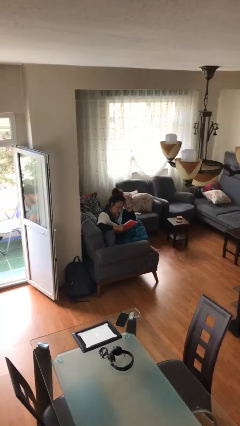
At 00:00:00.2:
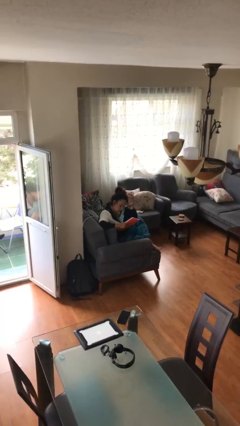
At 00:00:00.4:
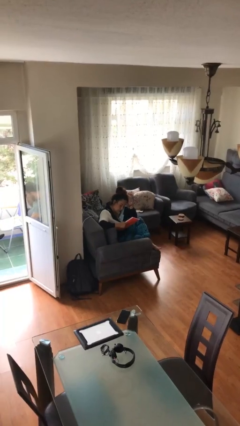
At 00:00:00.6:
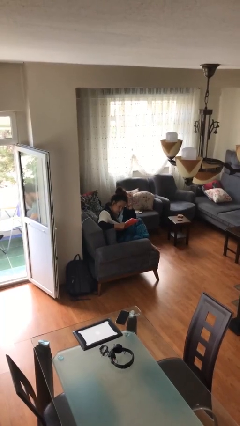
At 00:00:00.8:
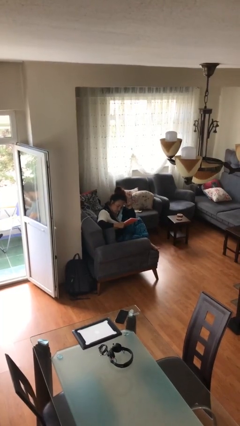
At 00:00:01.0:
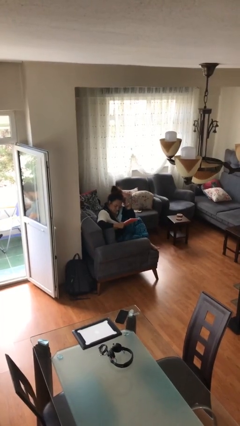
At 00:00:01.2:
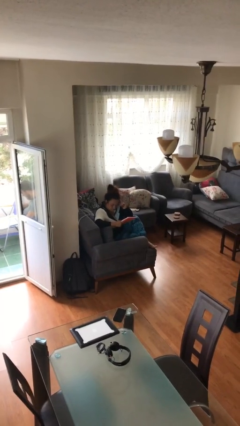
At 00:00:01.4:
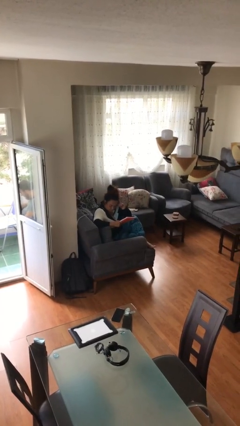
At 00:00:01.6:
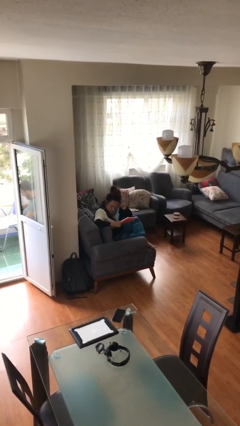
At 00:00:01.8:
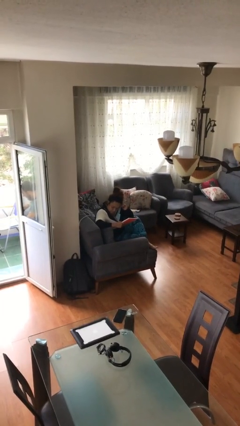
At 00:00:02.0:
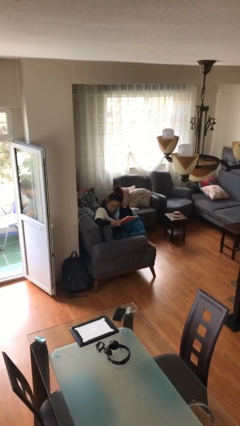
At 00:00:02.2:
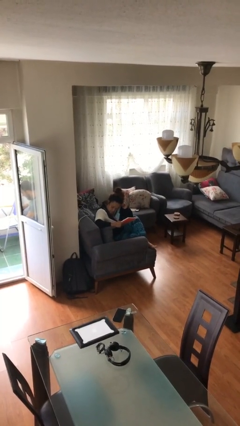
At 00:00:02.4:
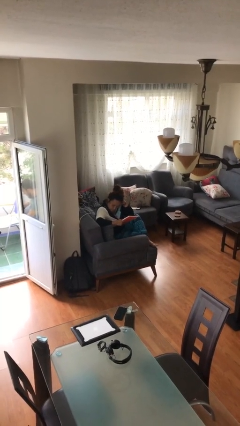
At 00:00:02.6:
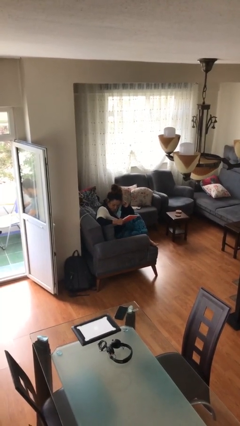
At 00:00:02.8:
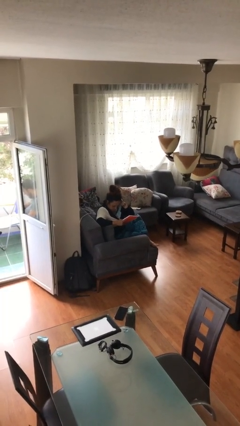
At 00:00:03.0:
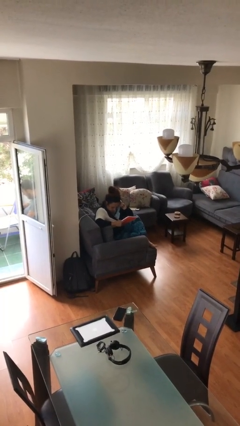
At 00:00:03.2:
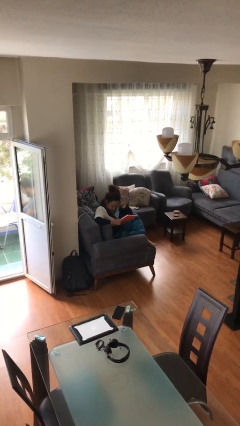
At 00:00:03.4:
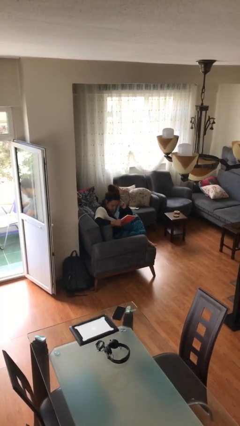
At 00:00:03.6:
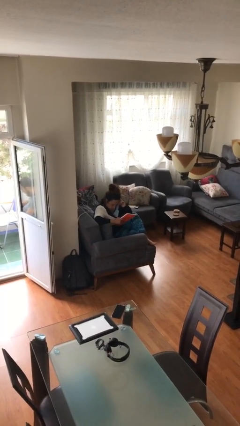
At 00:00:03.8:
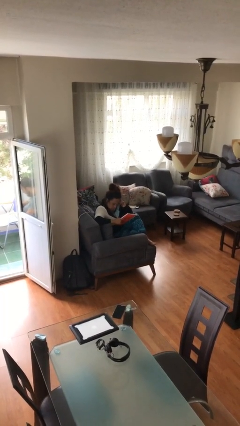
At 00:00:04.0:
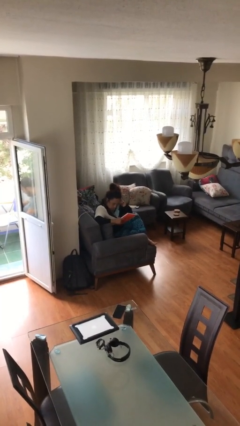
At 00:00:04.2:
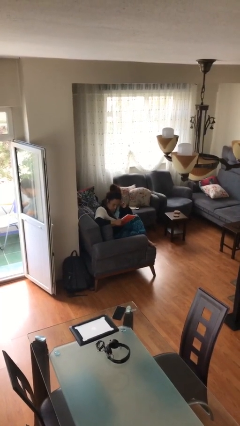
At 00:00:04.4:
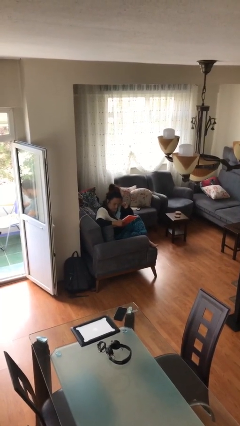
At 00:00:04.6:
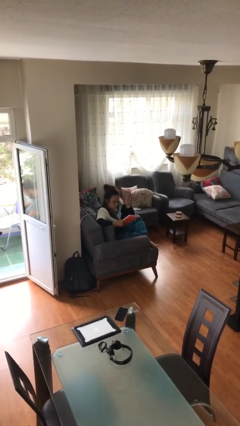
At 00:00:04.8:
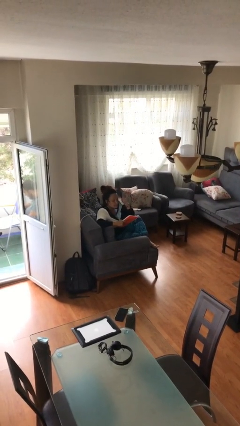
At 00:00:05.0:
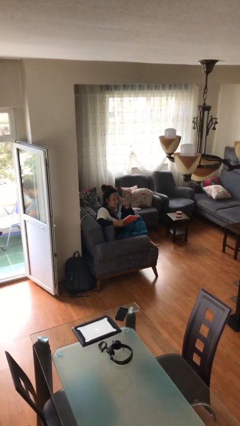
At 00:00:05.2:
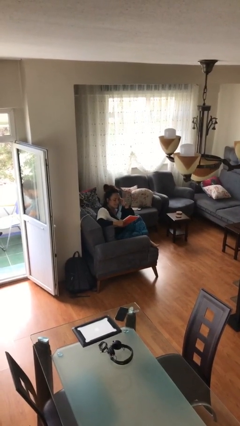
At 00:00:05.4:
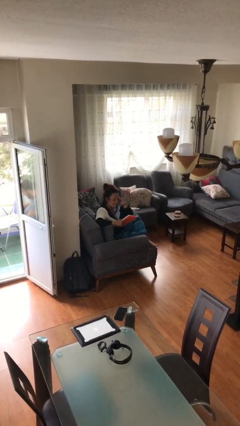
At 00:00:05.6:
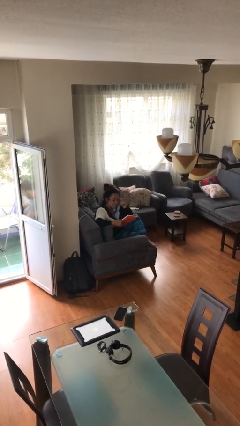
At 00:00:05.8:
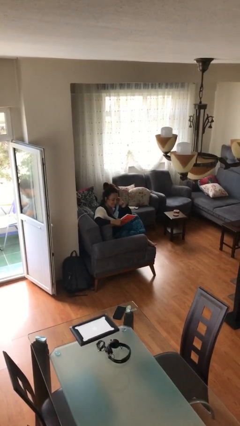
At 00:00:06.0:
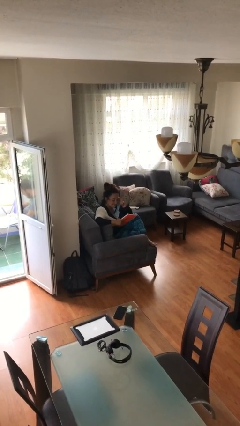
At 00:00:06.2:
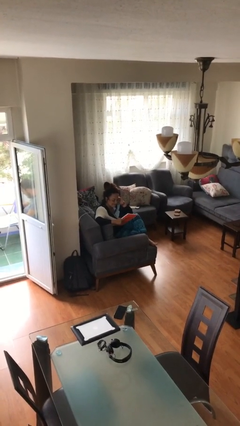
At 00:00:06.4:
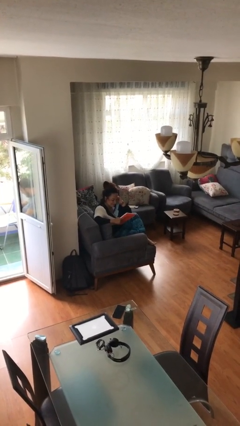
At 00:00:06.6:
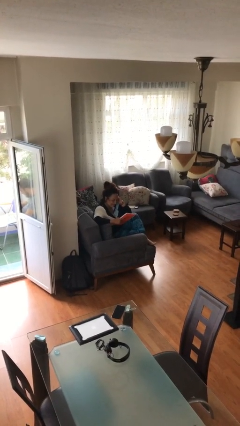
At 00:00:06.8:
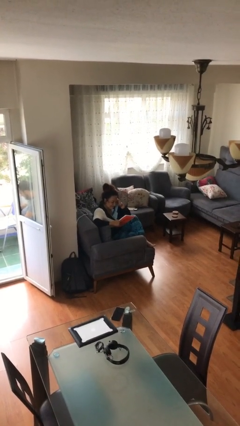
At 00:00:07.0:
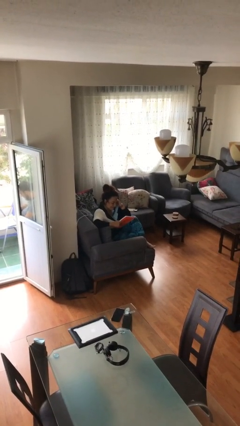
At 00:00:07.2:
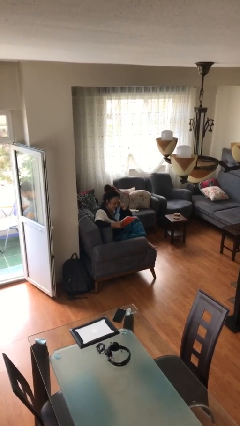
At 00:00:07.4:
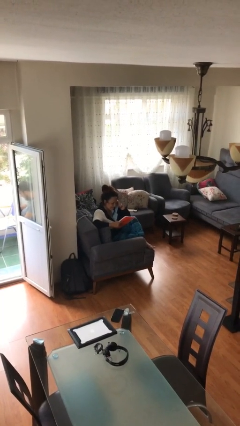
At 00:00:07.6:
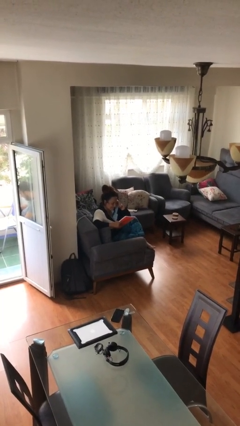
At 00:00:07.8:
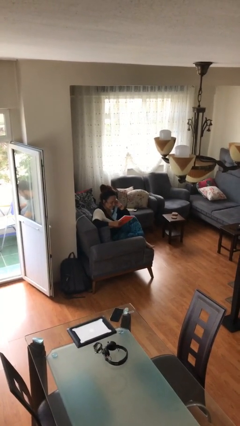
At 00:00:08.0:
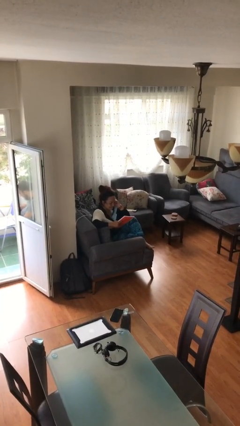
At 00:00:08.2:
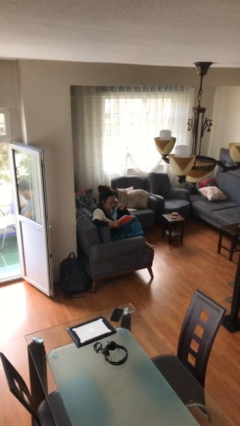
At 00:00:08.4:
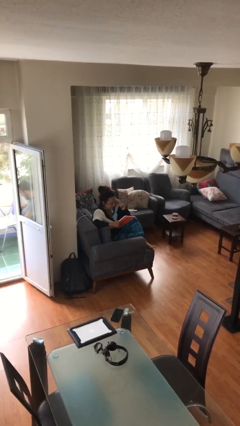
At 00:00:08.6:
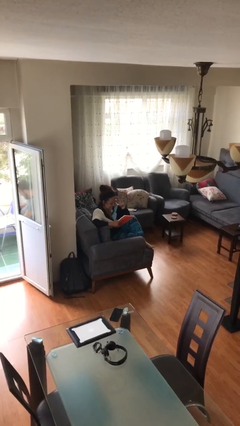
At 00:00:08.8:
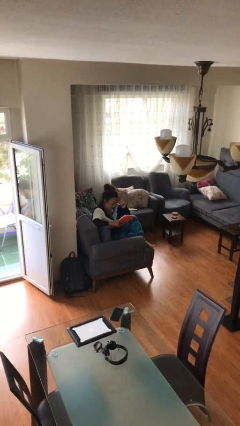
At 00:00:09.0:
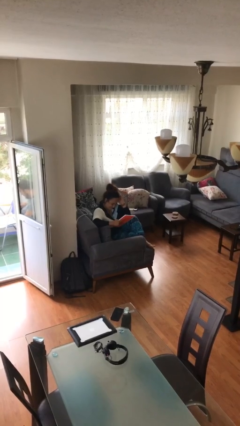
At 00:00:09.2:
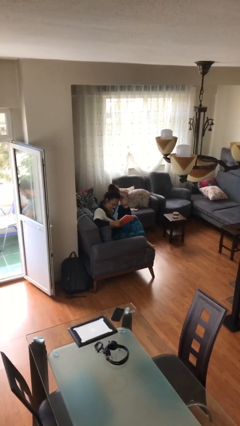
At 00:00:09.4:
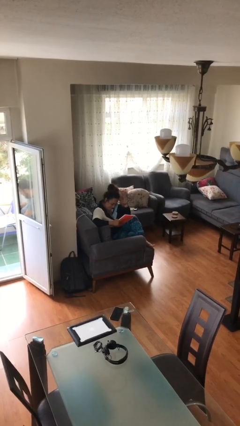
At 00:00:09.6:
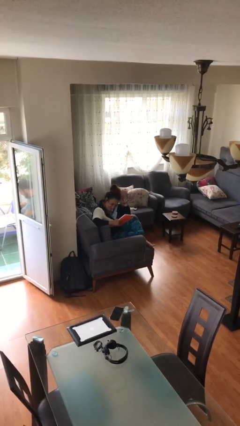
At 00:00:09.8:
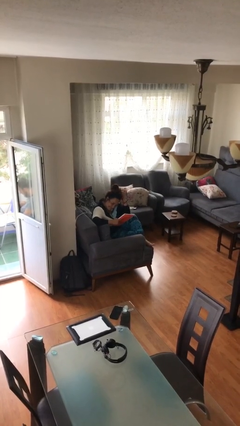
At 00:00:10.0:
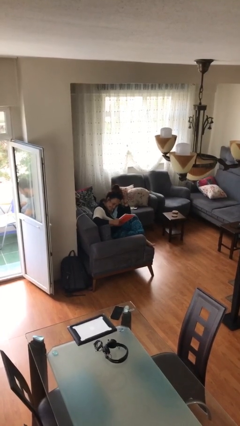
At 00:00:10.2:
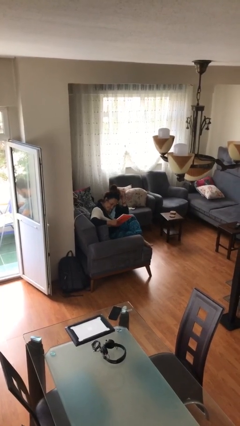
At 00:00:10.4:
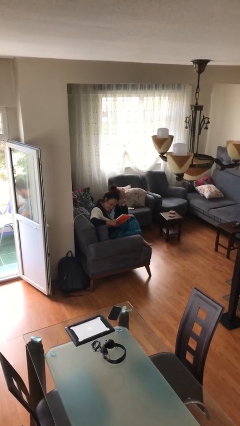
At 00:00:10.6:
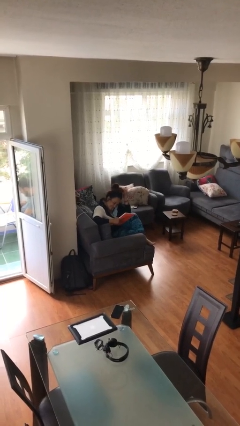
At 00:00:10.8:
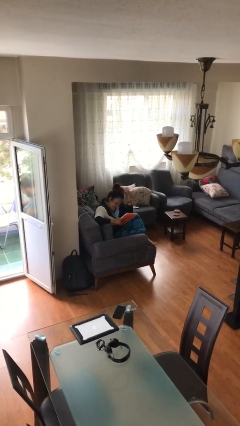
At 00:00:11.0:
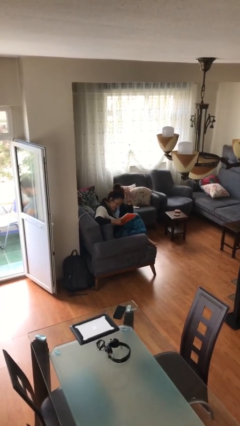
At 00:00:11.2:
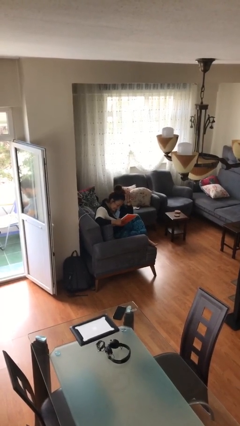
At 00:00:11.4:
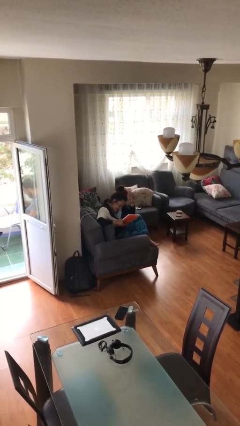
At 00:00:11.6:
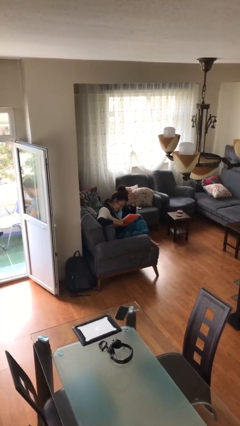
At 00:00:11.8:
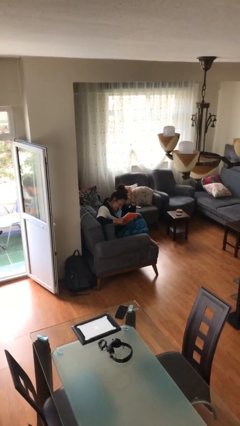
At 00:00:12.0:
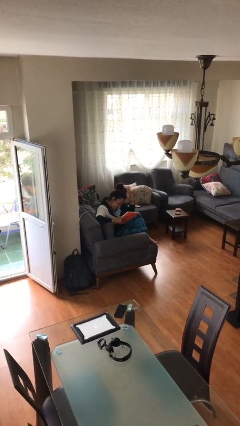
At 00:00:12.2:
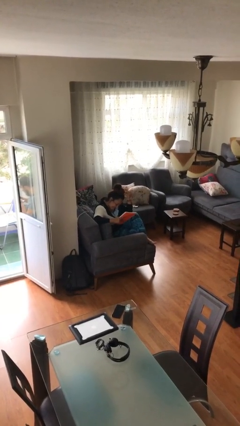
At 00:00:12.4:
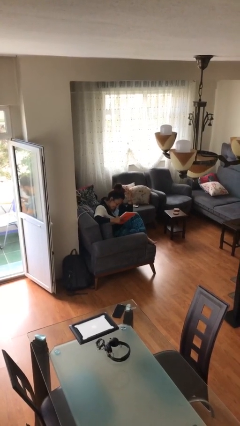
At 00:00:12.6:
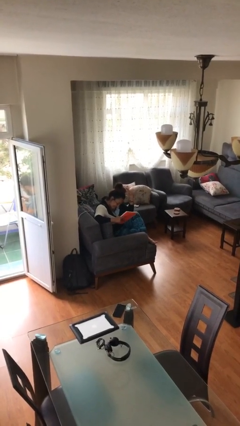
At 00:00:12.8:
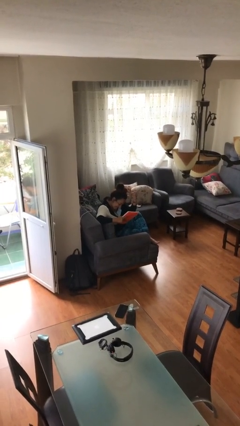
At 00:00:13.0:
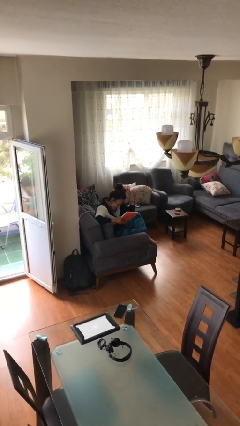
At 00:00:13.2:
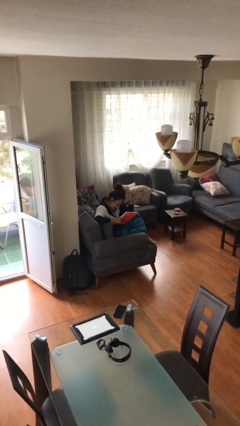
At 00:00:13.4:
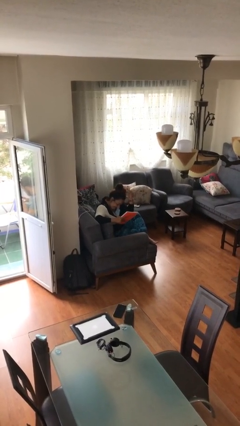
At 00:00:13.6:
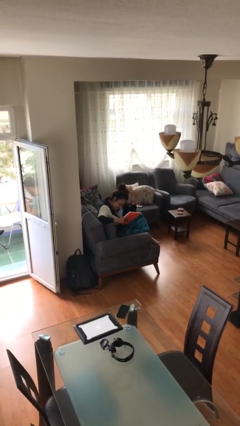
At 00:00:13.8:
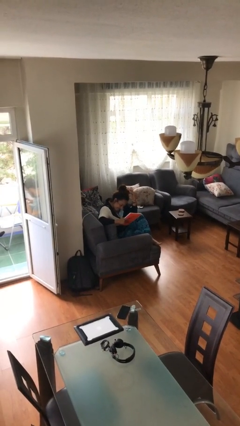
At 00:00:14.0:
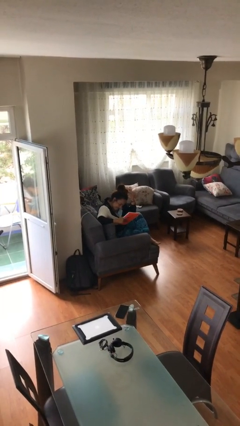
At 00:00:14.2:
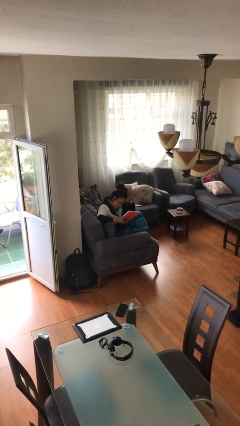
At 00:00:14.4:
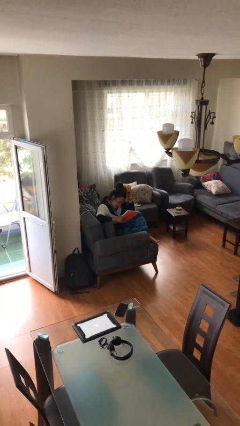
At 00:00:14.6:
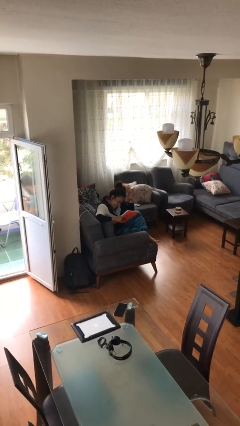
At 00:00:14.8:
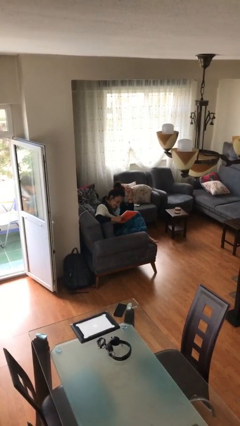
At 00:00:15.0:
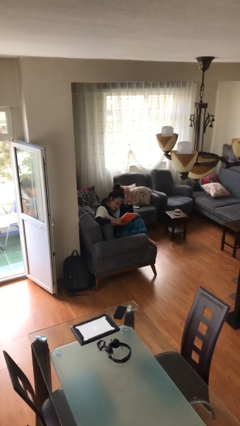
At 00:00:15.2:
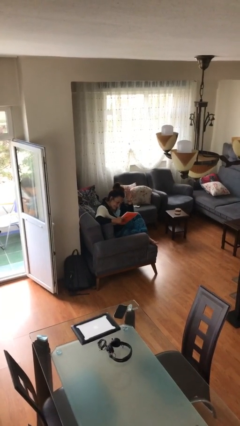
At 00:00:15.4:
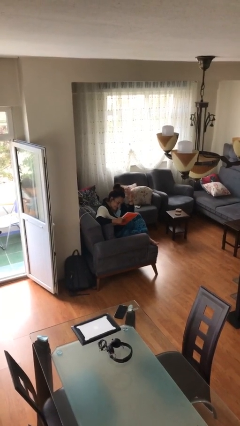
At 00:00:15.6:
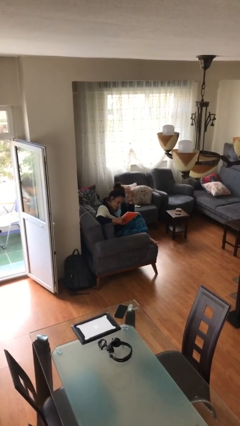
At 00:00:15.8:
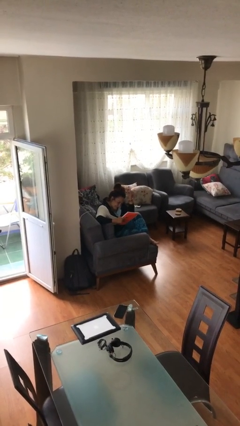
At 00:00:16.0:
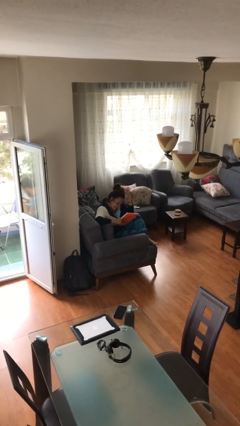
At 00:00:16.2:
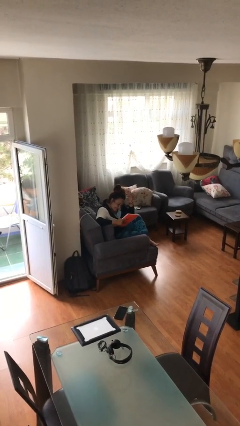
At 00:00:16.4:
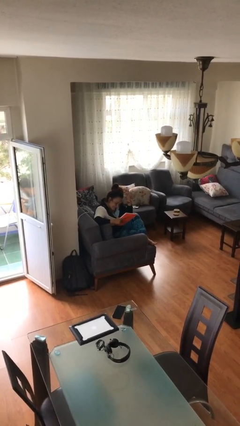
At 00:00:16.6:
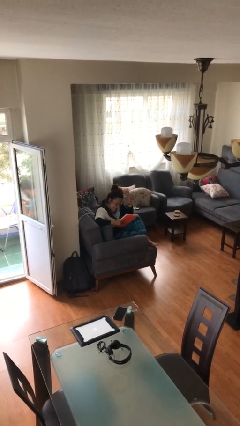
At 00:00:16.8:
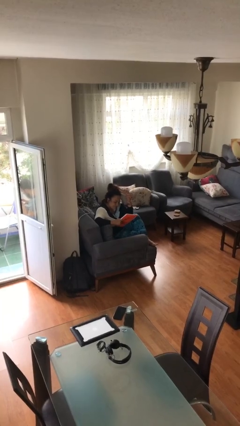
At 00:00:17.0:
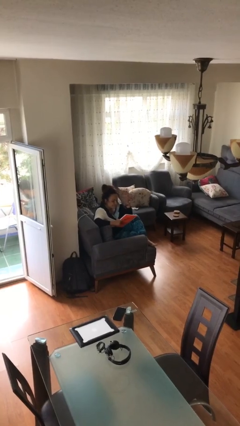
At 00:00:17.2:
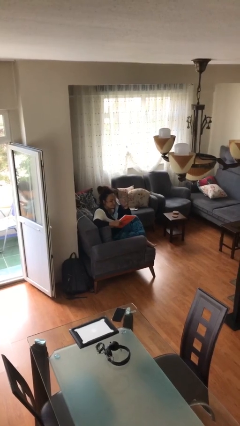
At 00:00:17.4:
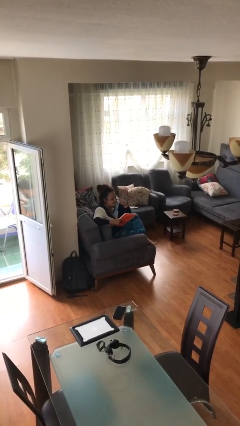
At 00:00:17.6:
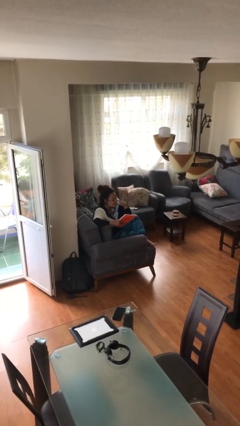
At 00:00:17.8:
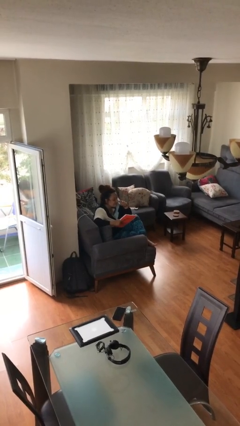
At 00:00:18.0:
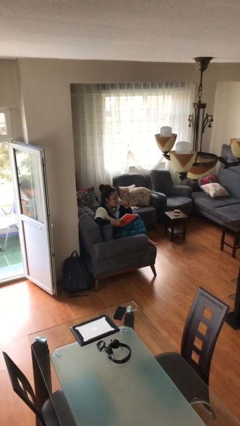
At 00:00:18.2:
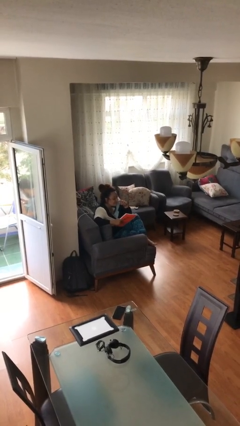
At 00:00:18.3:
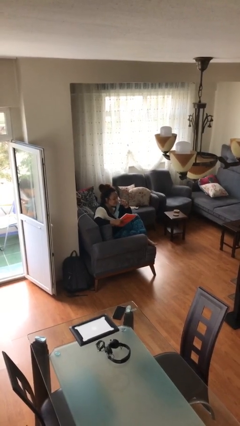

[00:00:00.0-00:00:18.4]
person reads document
